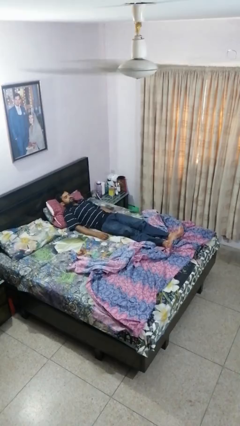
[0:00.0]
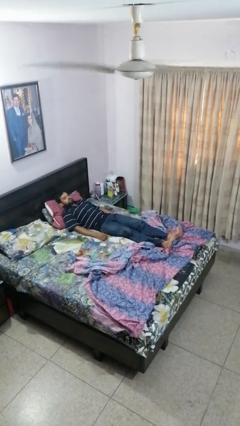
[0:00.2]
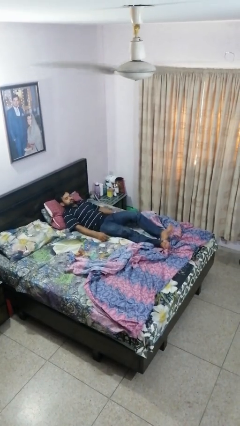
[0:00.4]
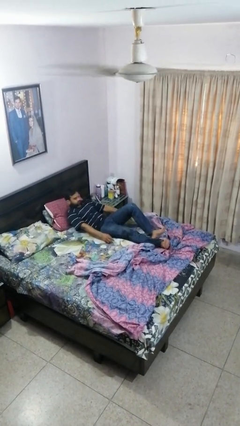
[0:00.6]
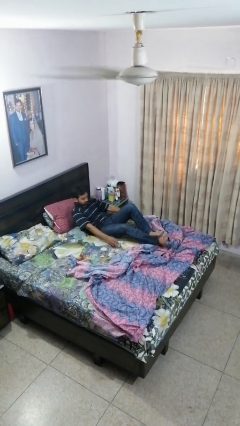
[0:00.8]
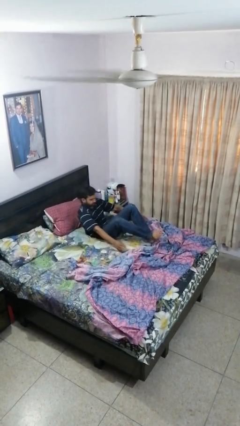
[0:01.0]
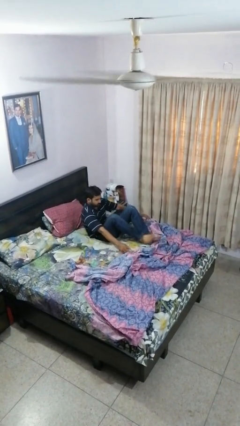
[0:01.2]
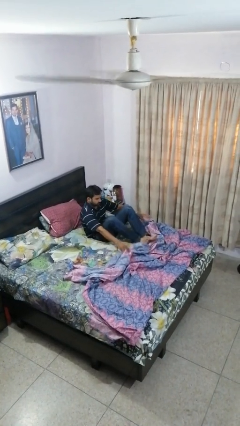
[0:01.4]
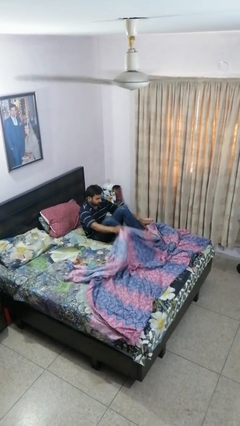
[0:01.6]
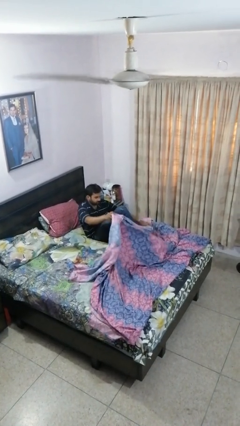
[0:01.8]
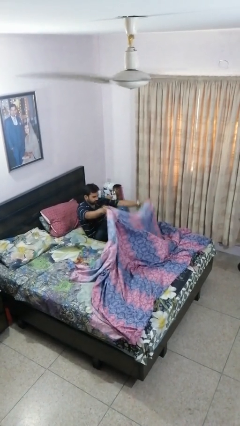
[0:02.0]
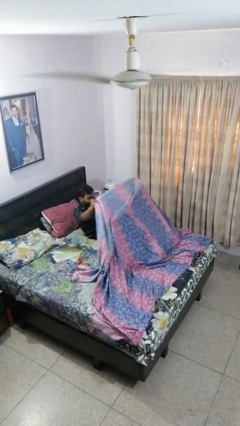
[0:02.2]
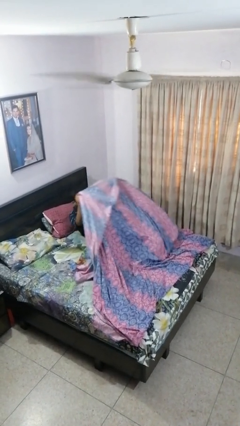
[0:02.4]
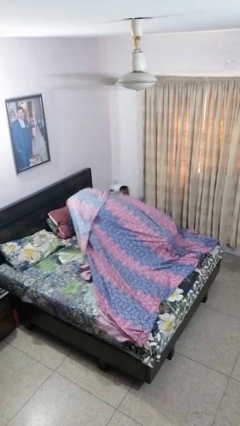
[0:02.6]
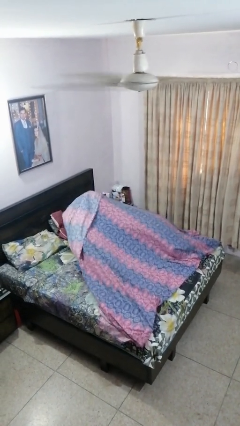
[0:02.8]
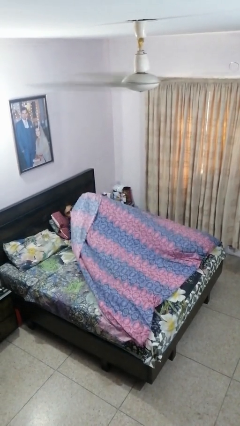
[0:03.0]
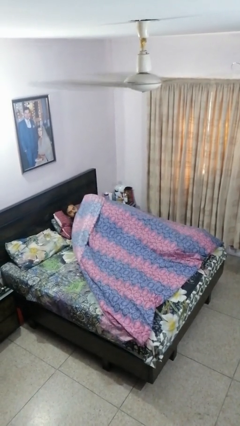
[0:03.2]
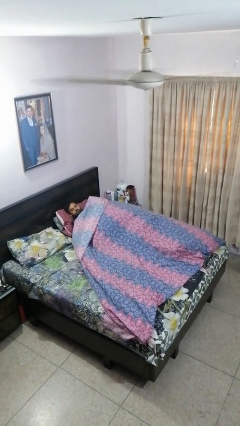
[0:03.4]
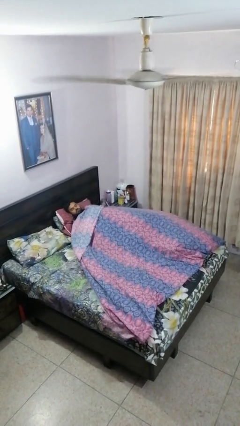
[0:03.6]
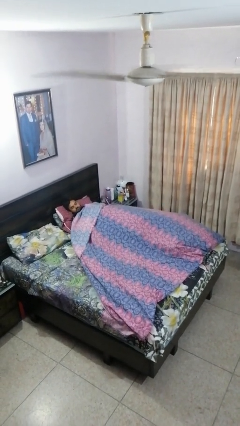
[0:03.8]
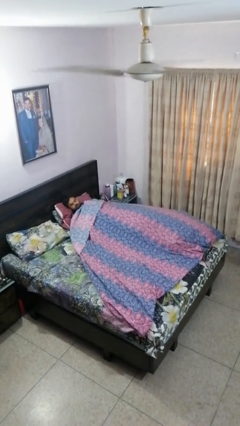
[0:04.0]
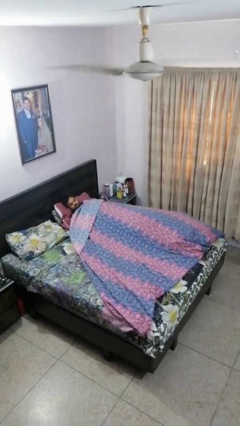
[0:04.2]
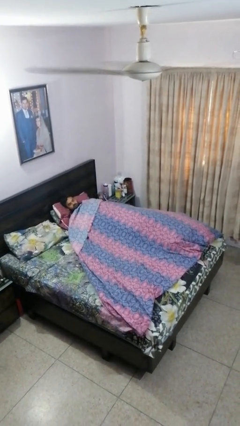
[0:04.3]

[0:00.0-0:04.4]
person covers with bedsheets

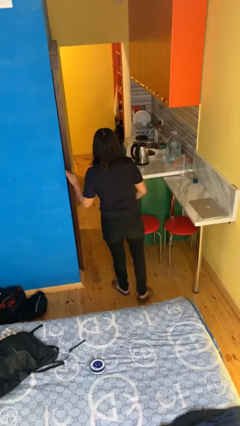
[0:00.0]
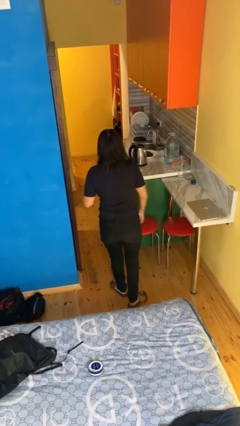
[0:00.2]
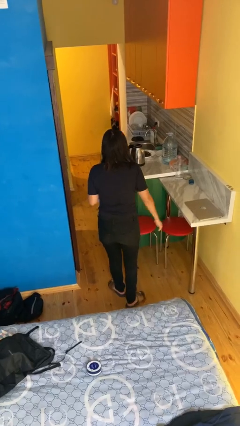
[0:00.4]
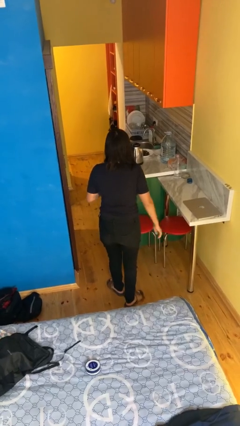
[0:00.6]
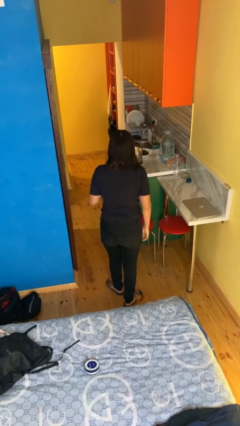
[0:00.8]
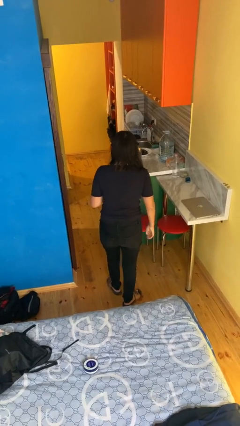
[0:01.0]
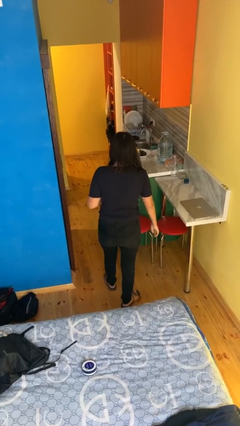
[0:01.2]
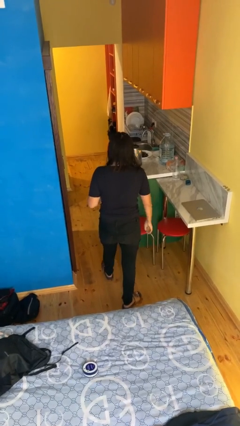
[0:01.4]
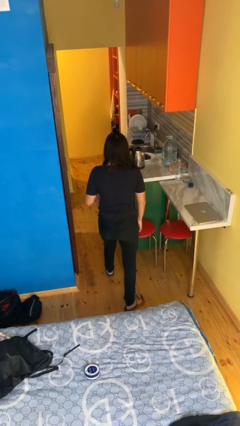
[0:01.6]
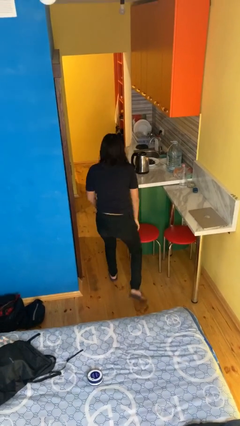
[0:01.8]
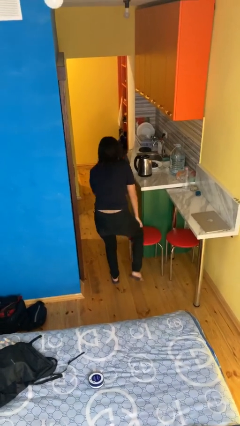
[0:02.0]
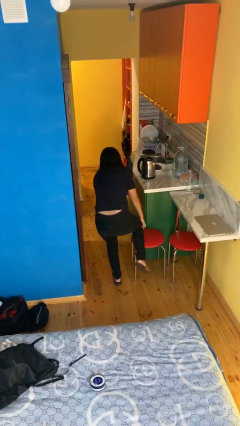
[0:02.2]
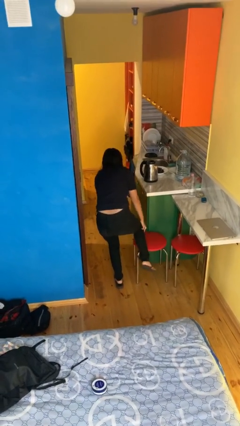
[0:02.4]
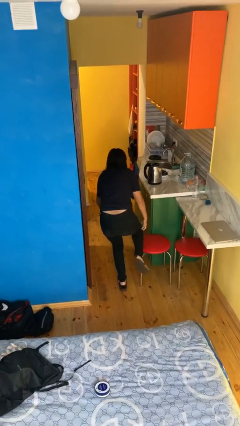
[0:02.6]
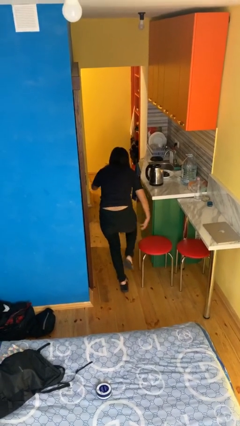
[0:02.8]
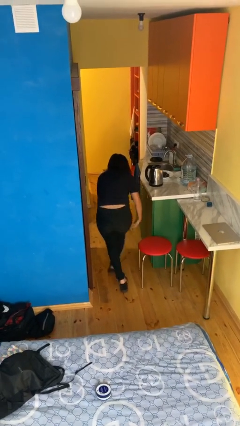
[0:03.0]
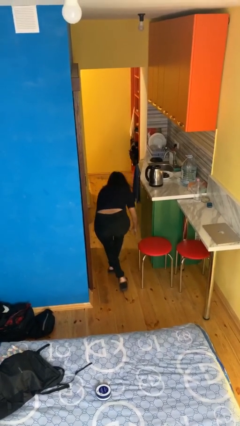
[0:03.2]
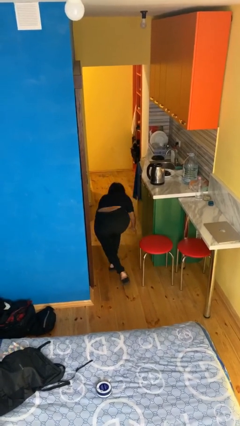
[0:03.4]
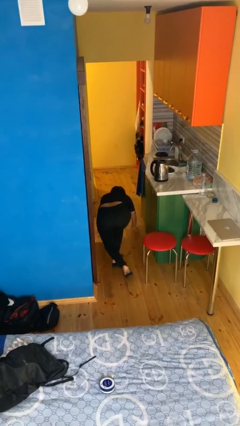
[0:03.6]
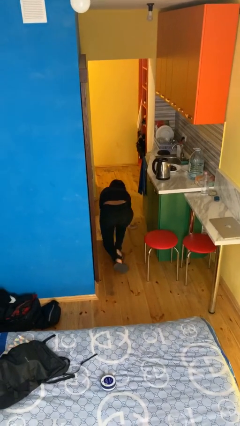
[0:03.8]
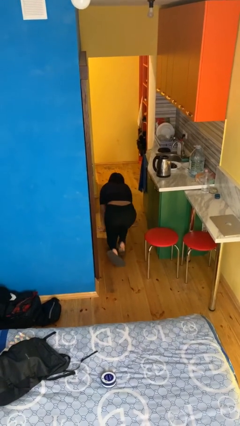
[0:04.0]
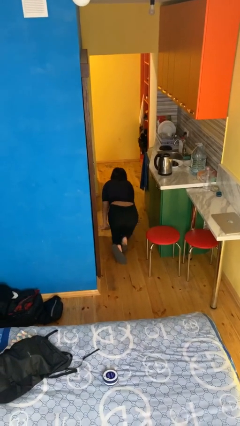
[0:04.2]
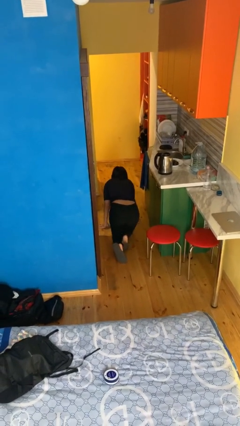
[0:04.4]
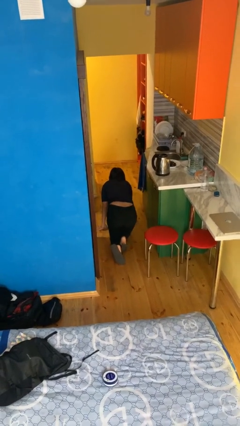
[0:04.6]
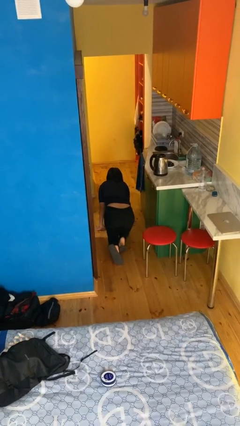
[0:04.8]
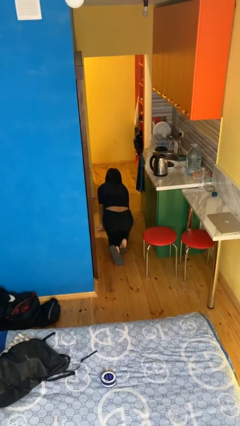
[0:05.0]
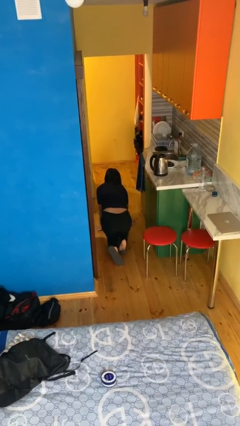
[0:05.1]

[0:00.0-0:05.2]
person trips on object on floor

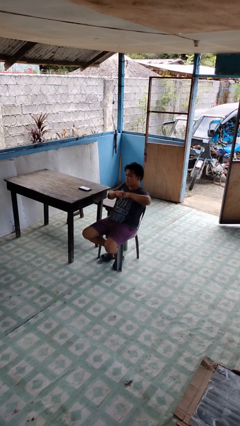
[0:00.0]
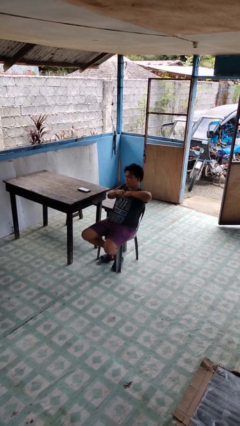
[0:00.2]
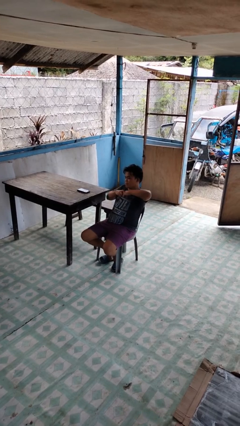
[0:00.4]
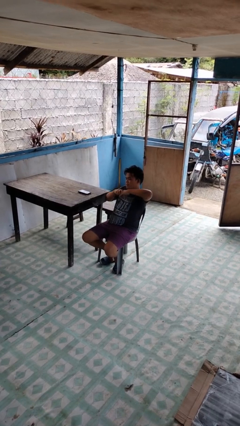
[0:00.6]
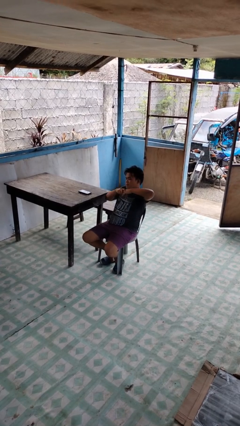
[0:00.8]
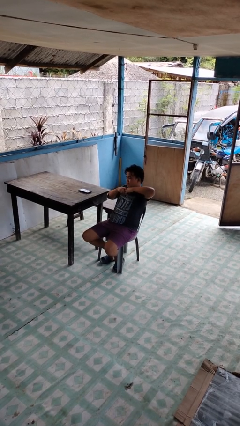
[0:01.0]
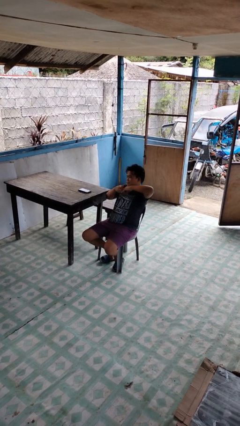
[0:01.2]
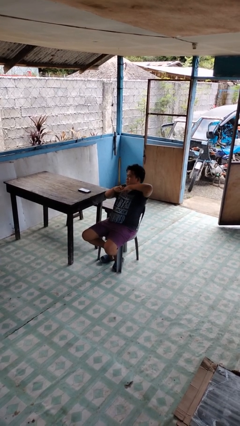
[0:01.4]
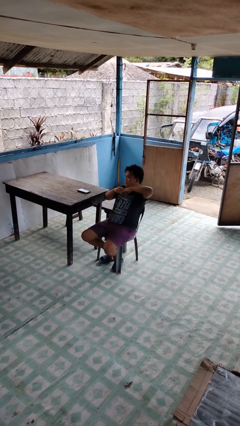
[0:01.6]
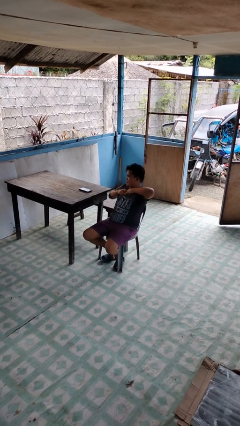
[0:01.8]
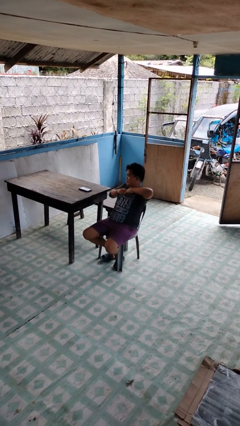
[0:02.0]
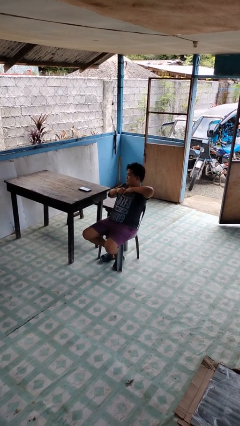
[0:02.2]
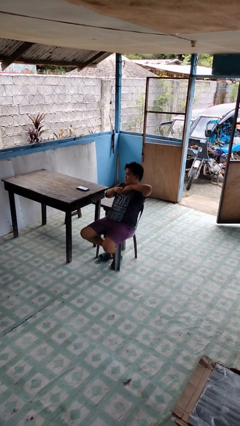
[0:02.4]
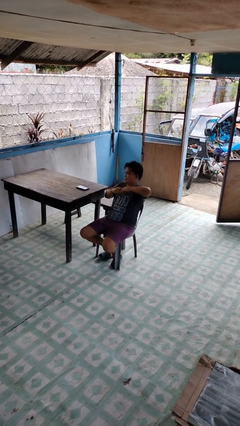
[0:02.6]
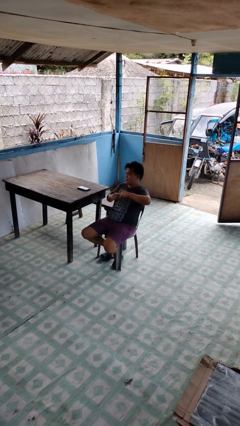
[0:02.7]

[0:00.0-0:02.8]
person cracks knuckles

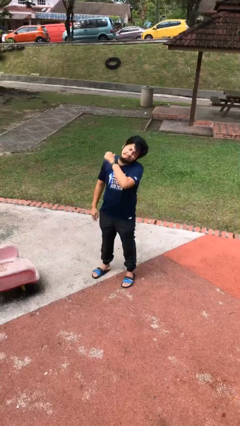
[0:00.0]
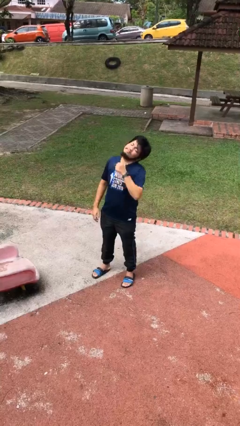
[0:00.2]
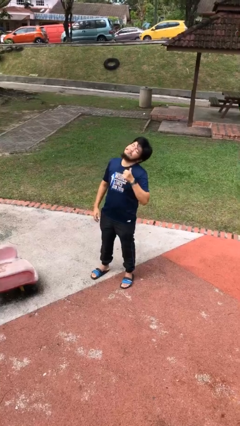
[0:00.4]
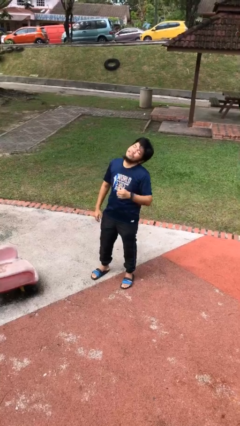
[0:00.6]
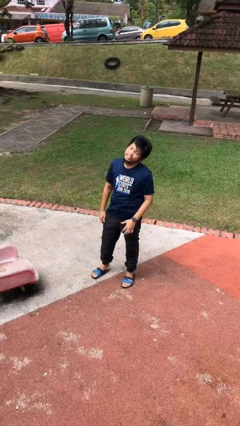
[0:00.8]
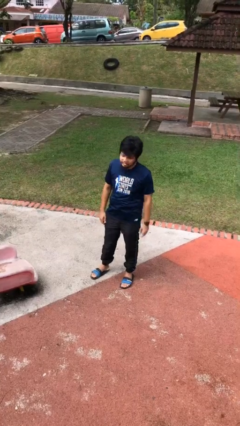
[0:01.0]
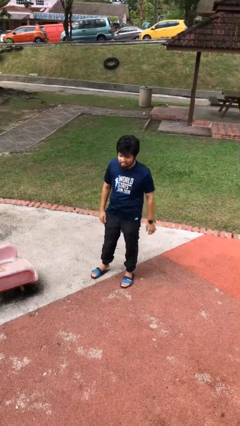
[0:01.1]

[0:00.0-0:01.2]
person gestures cut

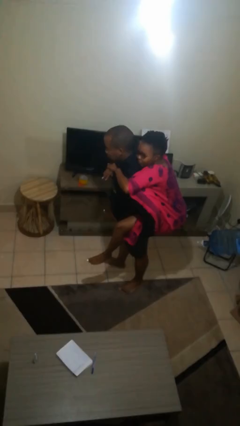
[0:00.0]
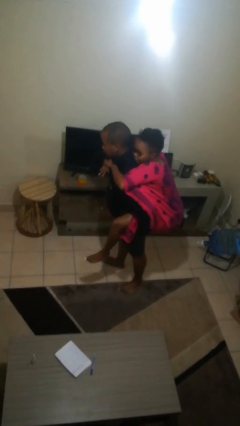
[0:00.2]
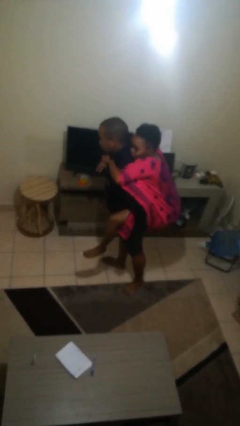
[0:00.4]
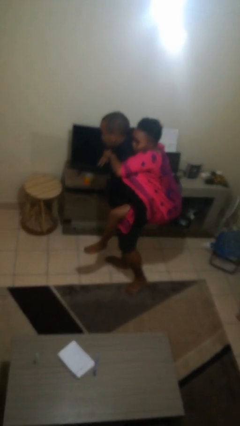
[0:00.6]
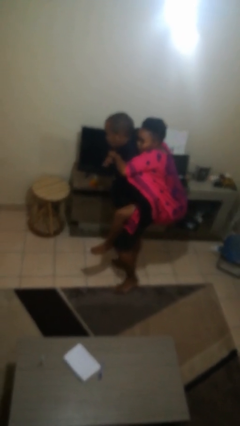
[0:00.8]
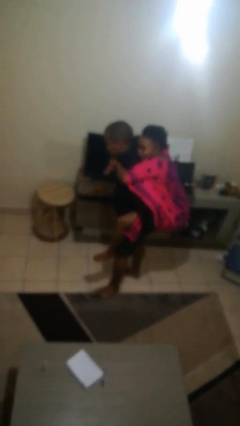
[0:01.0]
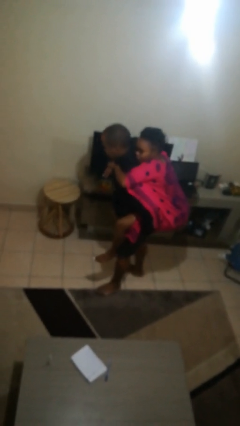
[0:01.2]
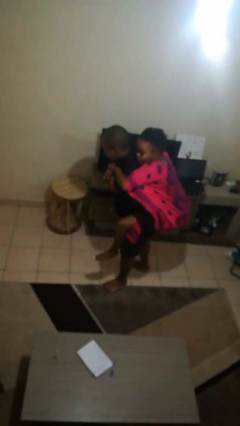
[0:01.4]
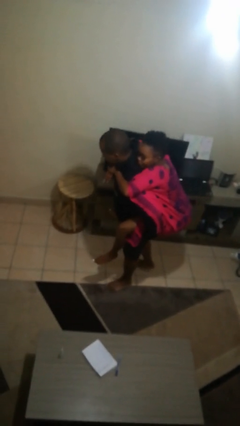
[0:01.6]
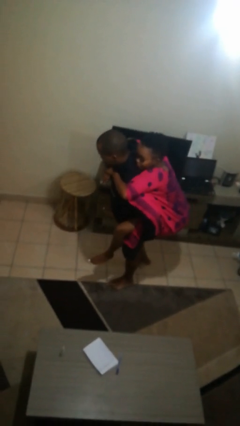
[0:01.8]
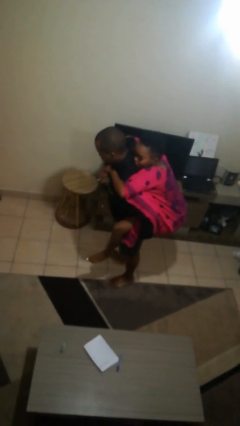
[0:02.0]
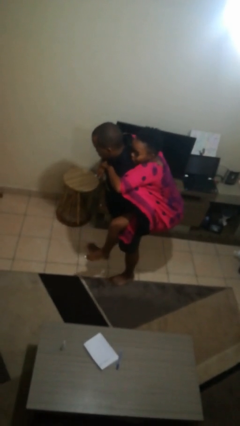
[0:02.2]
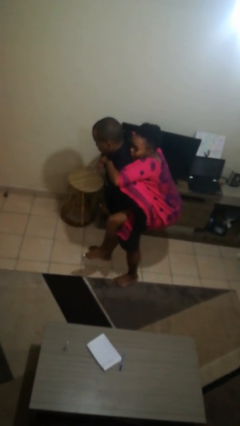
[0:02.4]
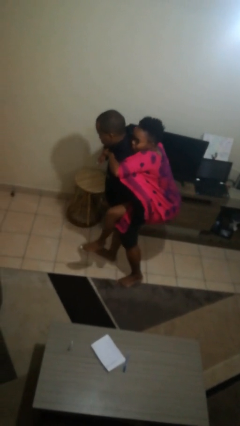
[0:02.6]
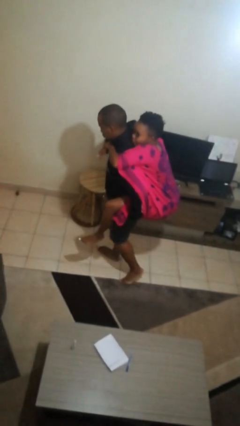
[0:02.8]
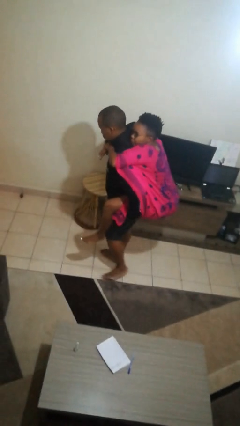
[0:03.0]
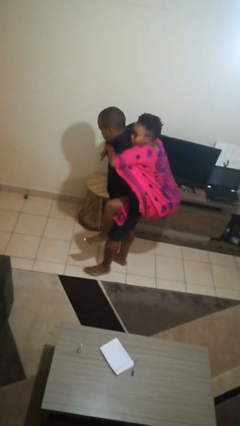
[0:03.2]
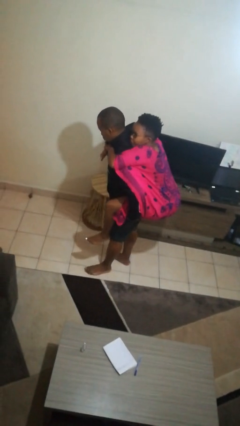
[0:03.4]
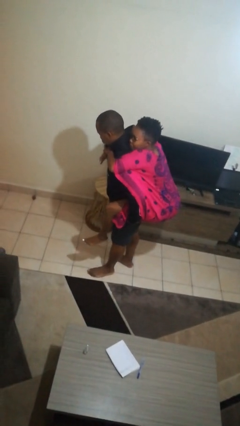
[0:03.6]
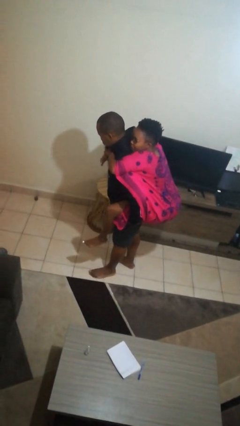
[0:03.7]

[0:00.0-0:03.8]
person carries person on back

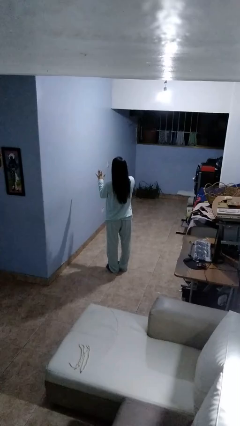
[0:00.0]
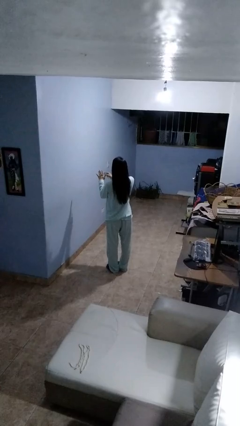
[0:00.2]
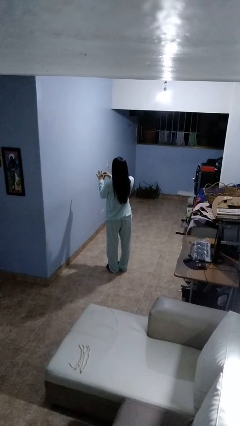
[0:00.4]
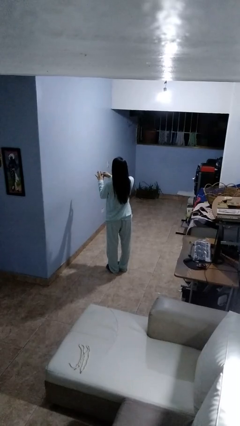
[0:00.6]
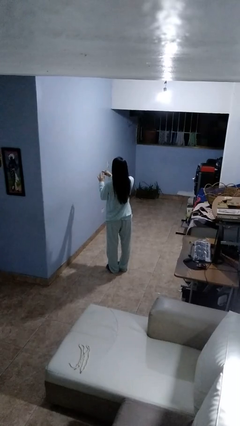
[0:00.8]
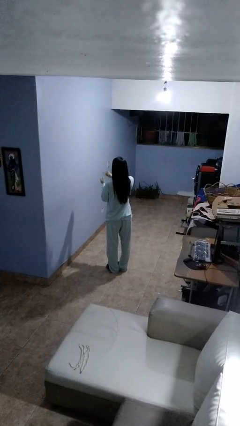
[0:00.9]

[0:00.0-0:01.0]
person takes off ring
